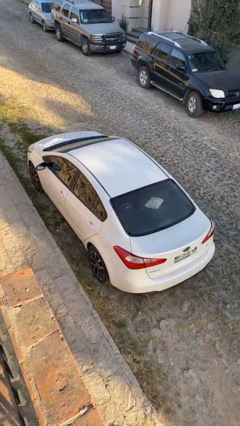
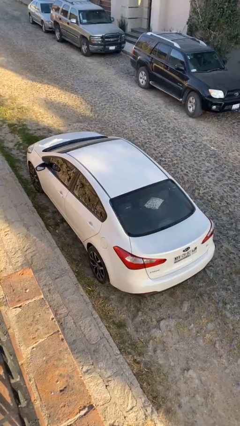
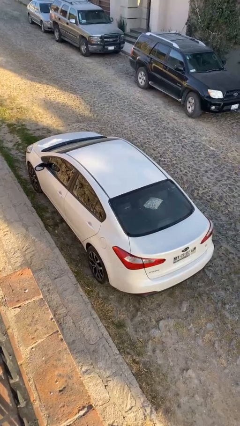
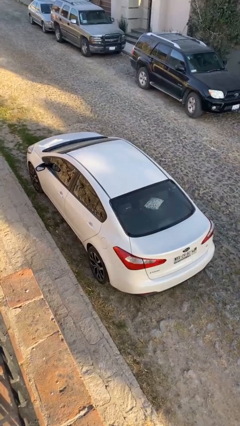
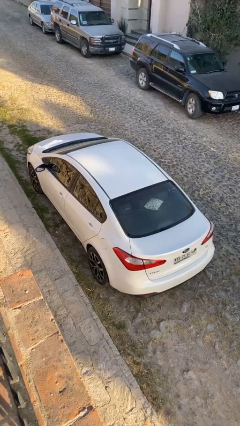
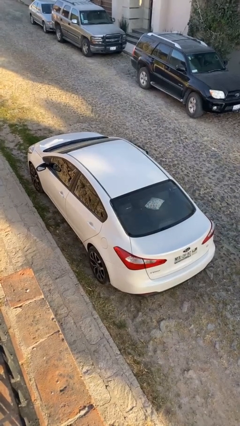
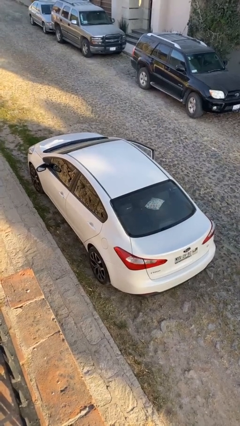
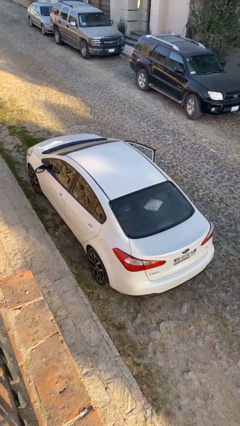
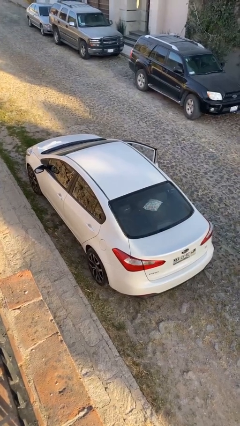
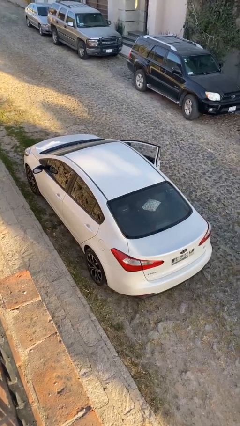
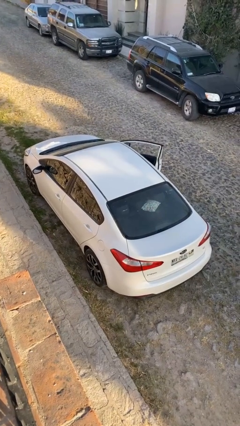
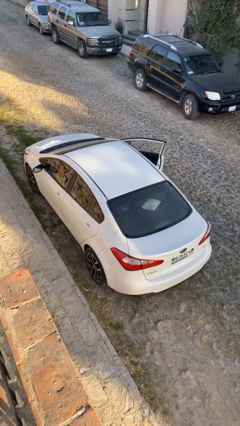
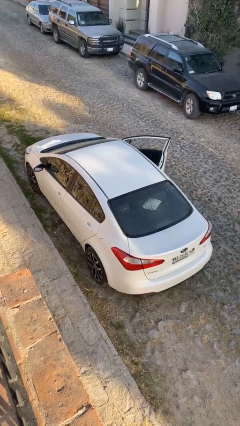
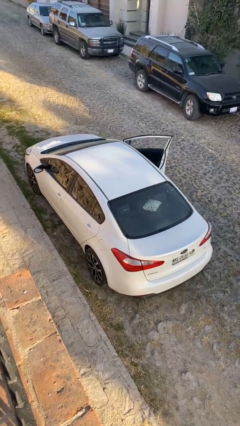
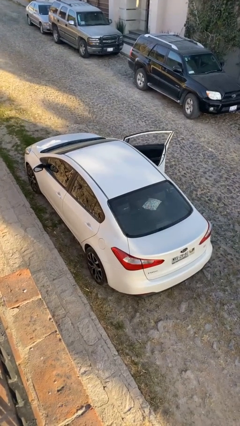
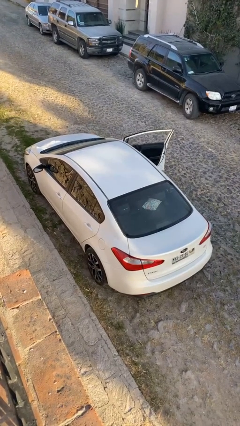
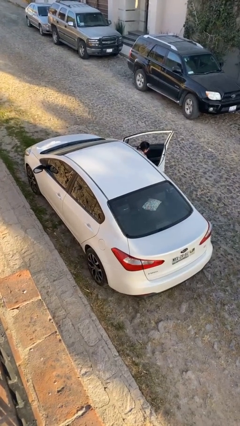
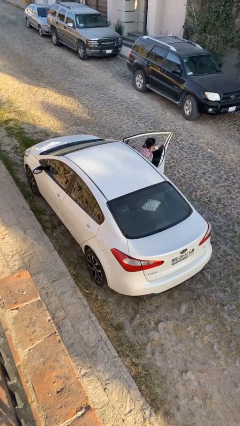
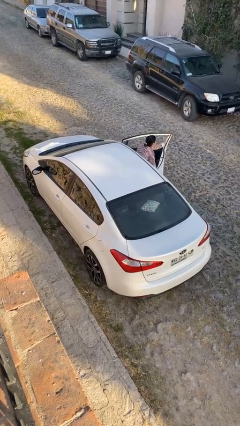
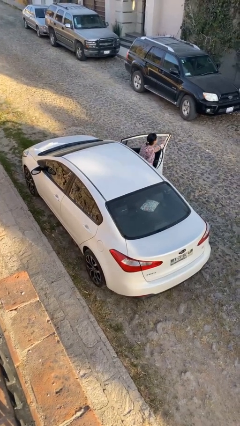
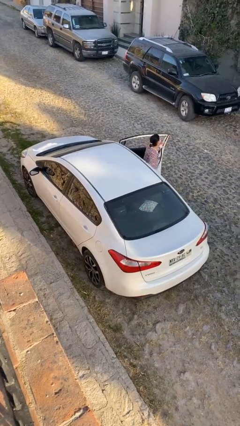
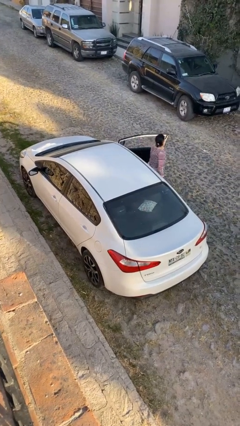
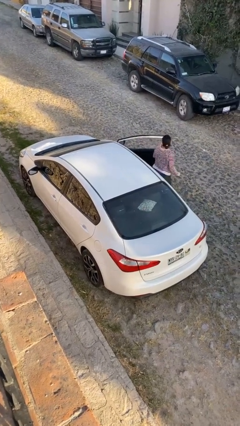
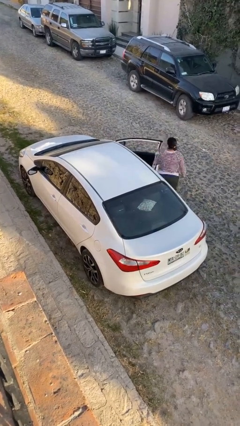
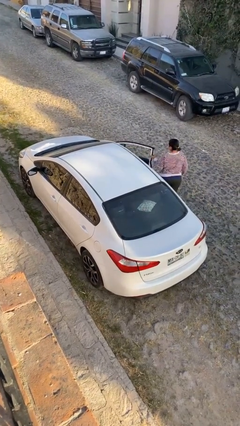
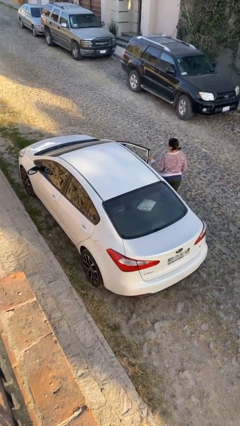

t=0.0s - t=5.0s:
car drops off person

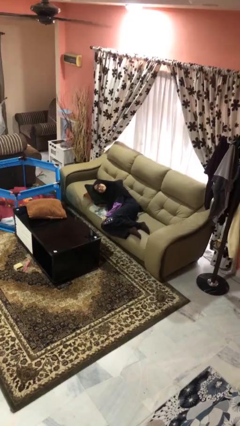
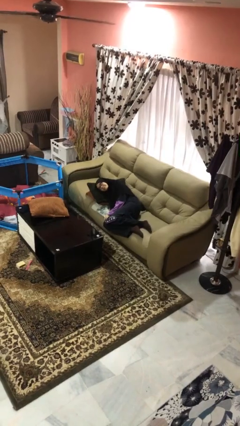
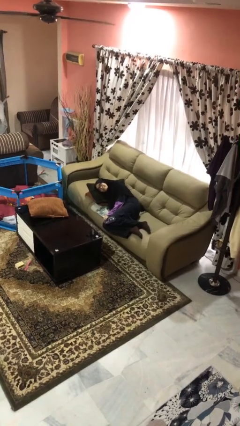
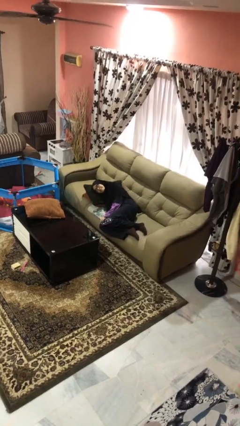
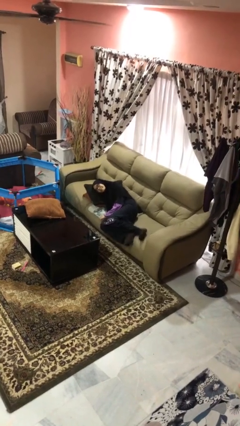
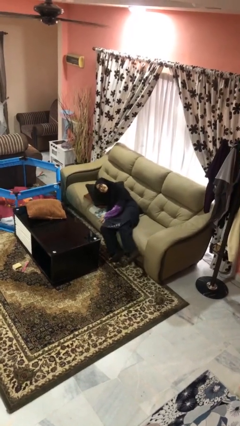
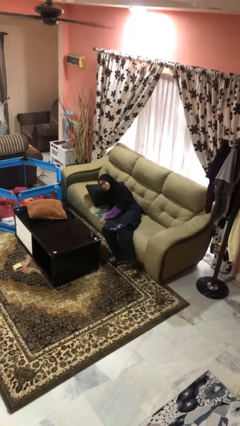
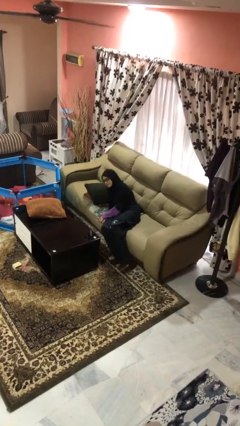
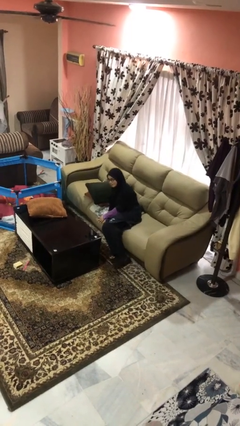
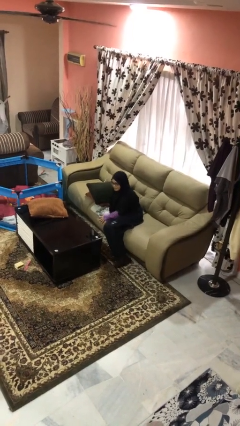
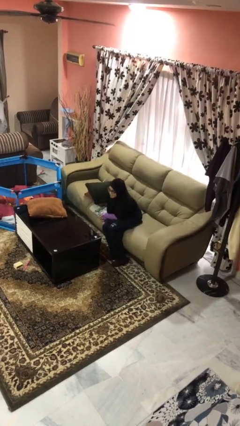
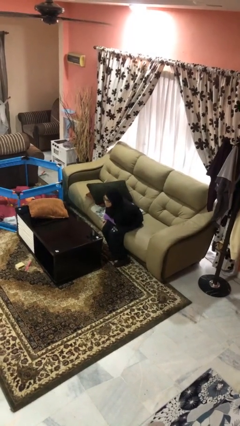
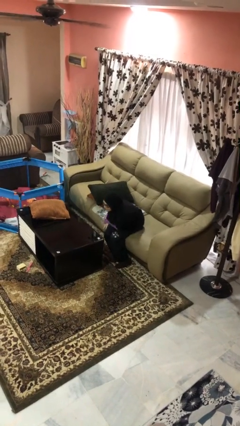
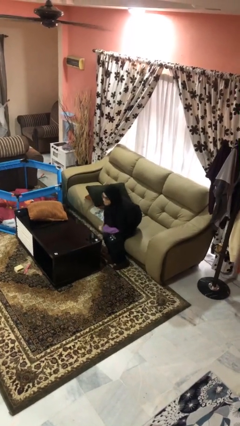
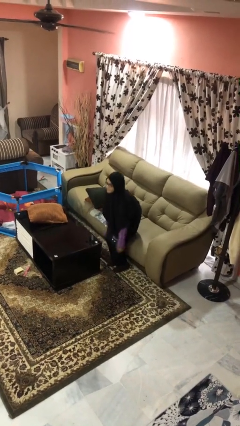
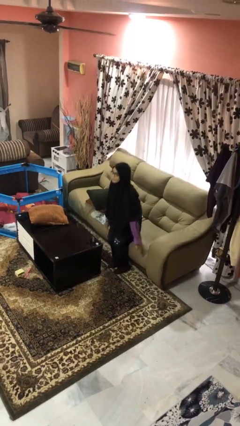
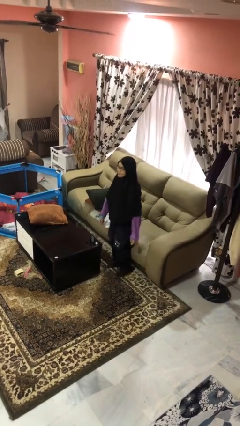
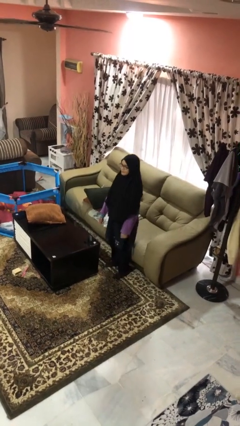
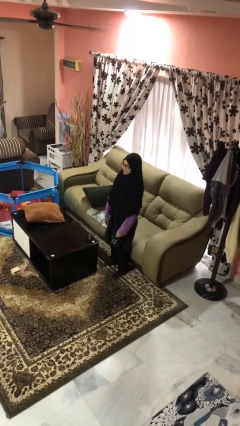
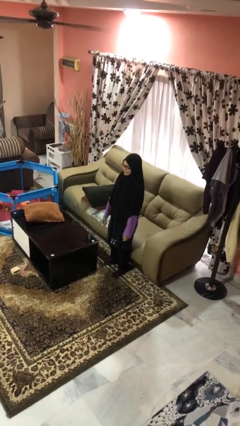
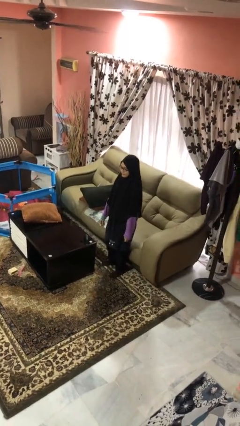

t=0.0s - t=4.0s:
person stands up

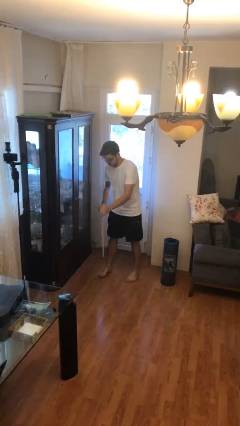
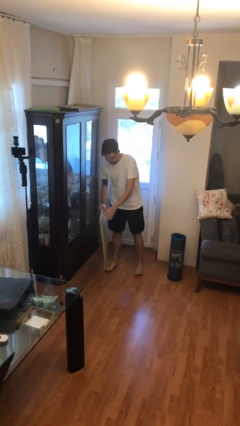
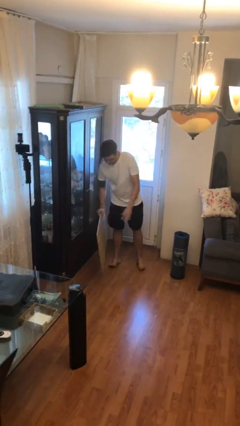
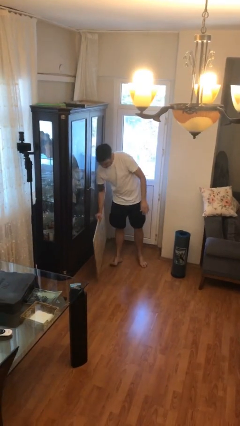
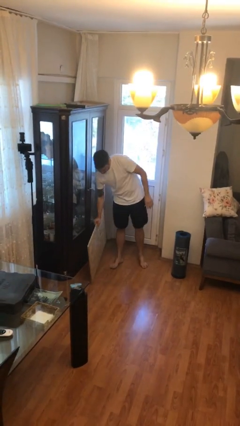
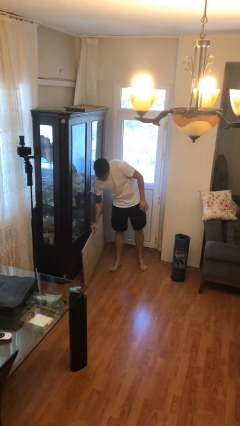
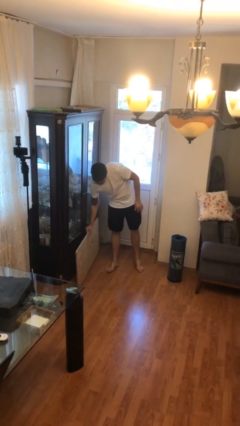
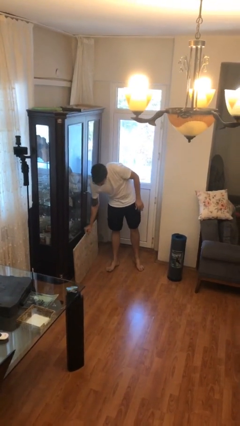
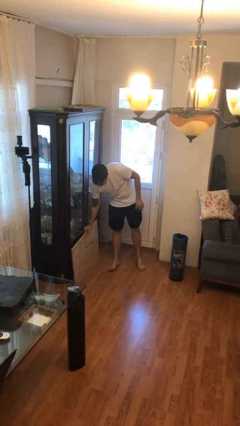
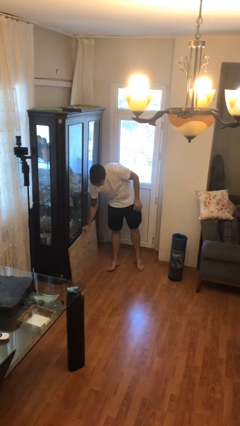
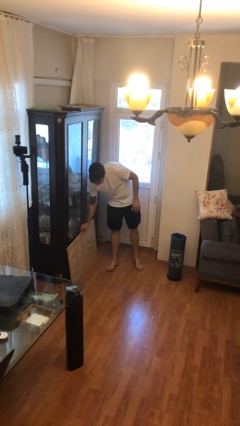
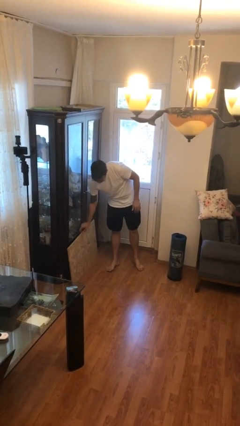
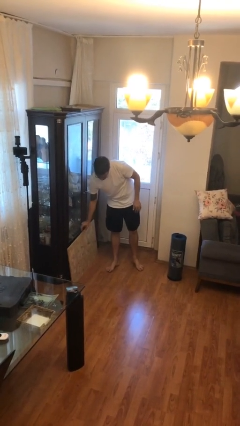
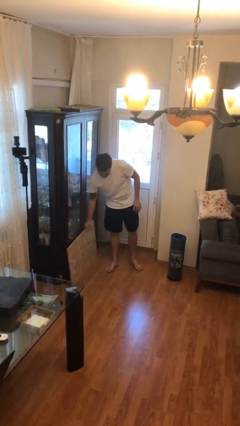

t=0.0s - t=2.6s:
person puts down object on floor

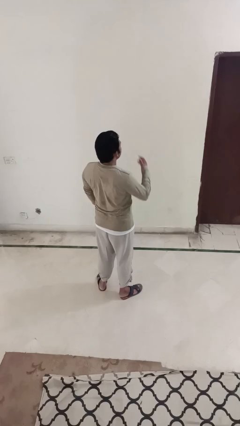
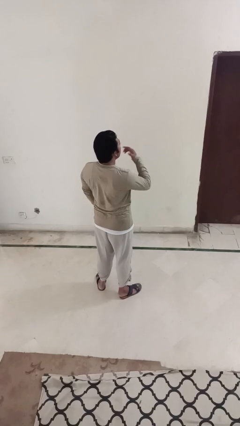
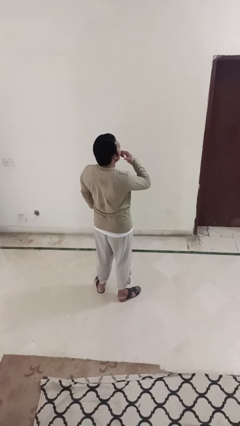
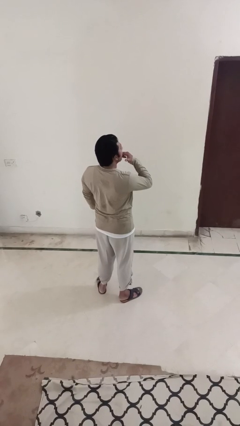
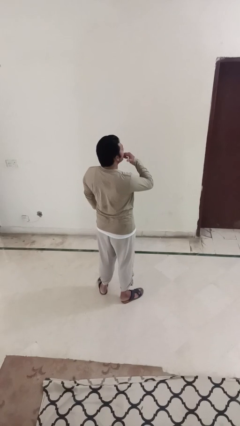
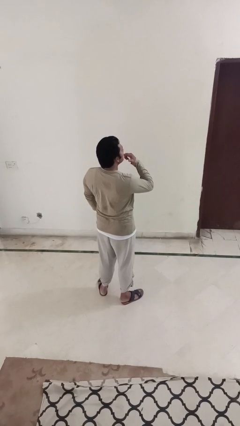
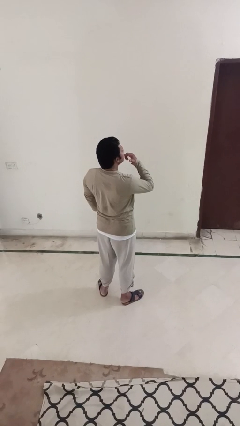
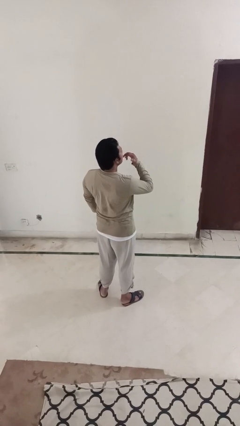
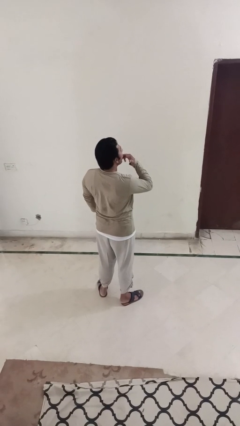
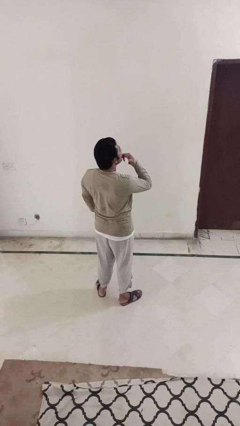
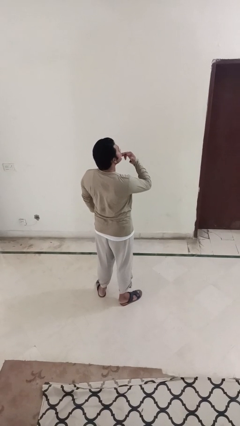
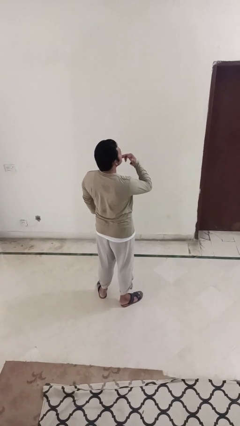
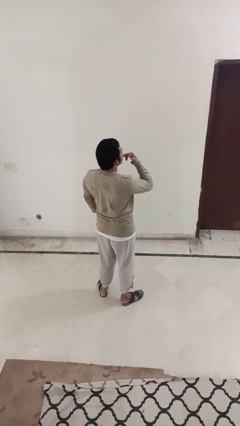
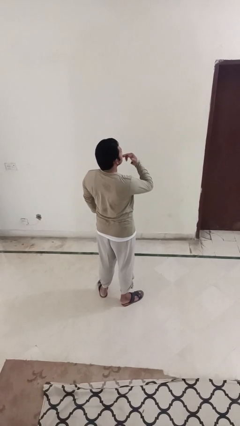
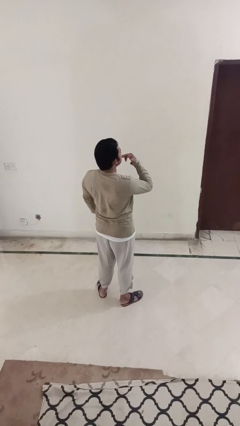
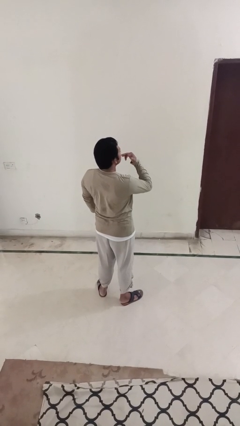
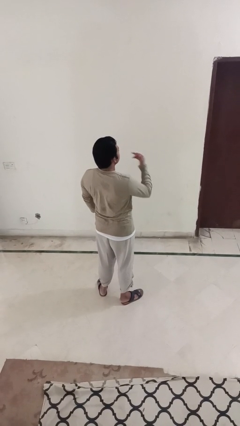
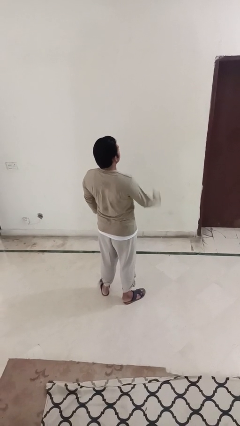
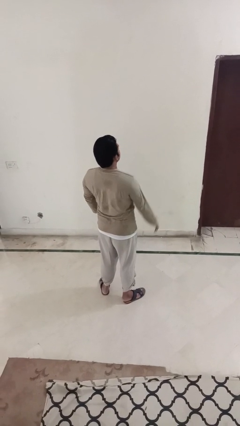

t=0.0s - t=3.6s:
person licks fingers

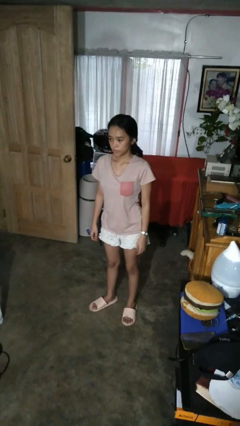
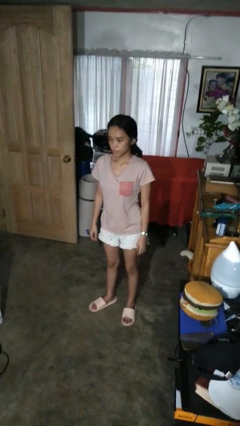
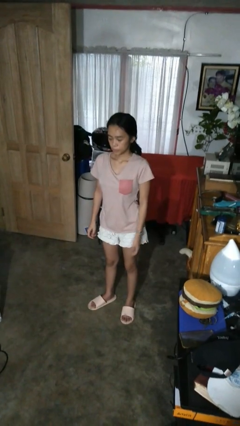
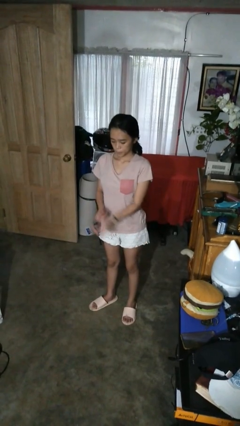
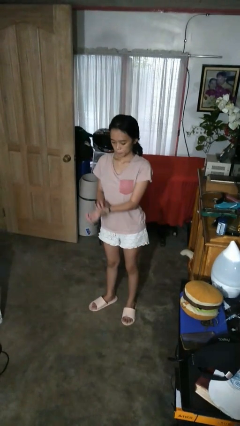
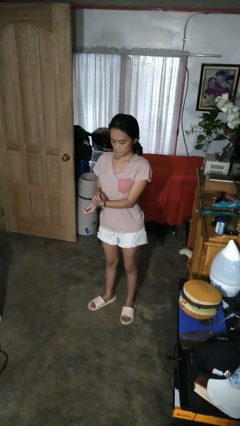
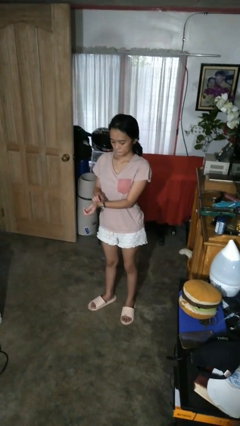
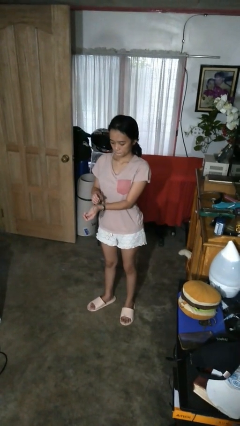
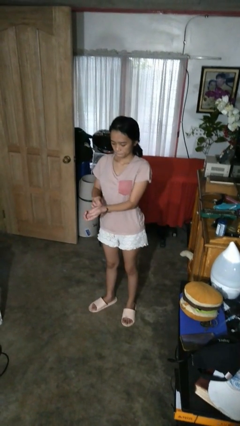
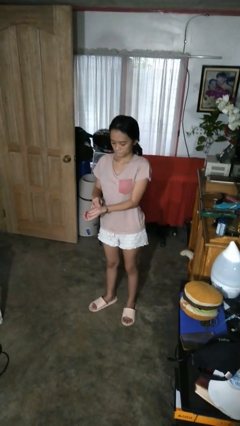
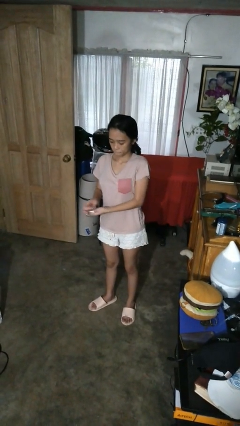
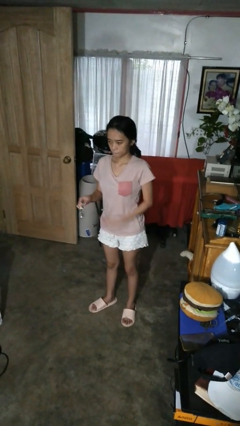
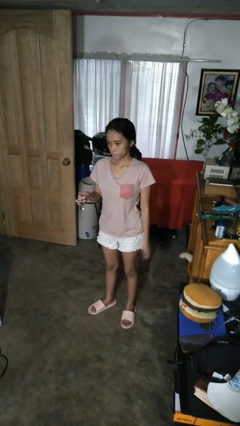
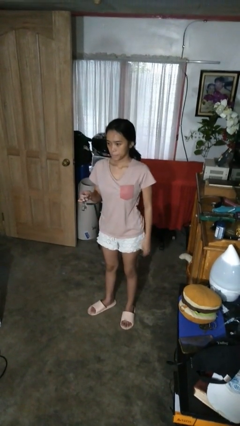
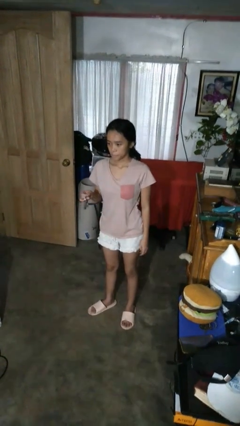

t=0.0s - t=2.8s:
person takes off wristwatch
